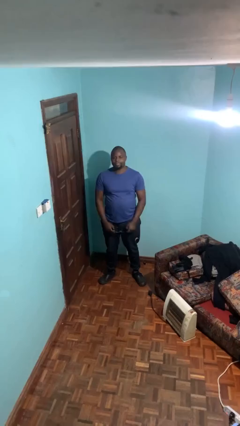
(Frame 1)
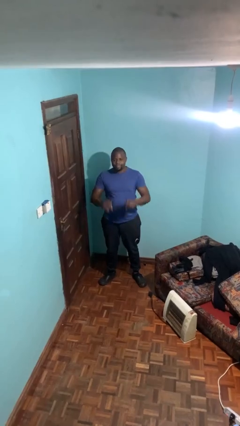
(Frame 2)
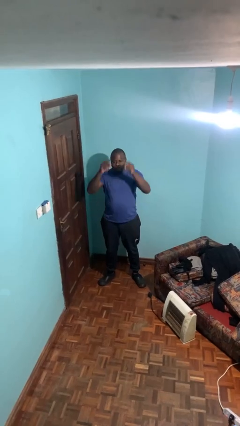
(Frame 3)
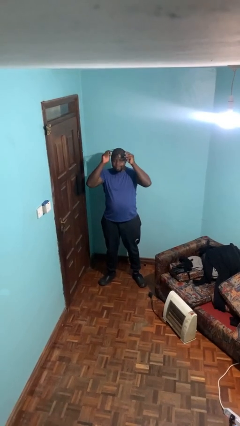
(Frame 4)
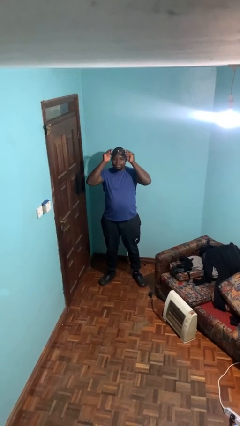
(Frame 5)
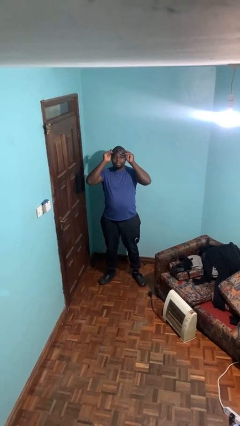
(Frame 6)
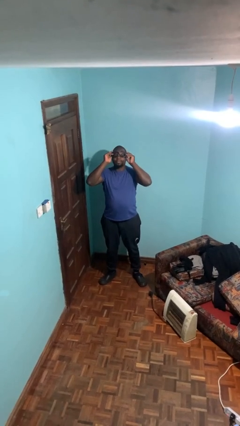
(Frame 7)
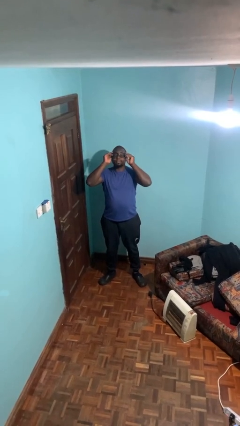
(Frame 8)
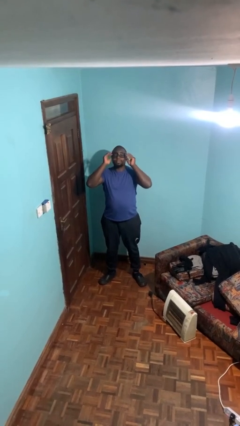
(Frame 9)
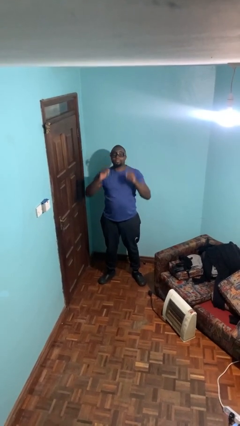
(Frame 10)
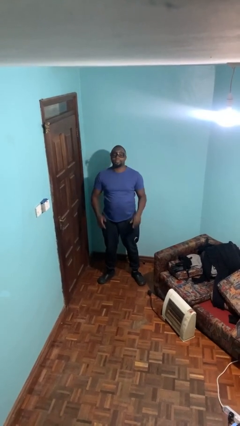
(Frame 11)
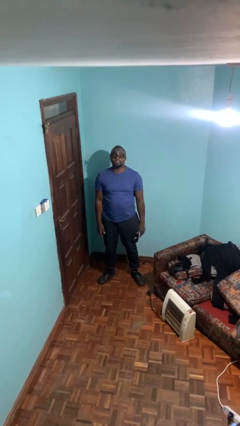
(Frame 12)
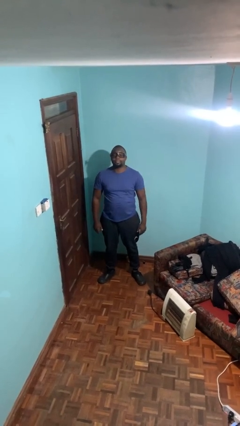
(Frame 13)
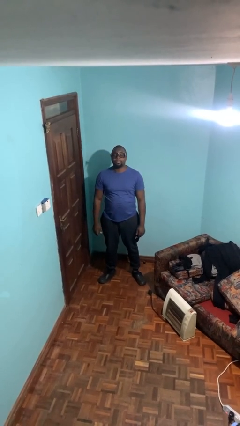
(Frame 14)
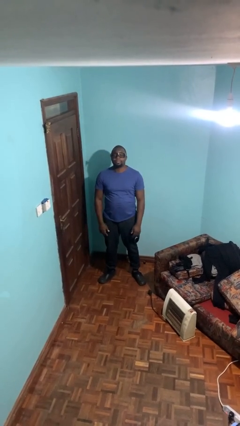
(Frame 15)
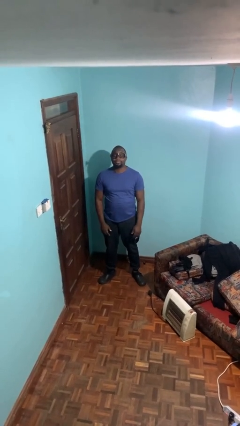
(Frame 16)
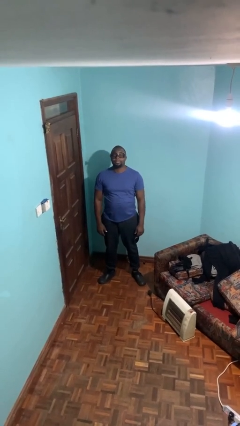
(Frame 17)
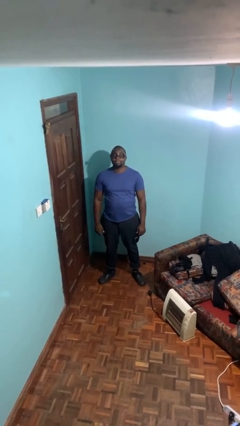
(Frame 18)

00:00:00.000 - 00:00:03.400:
person puts on glasses

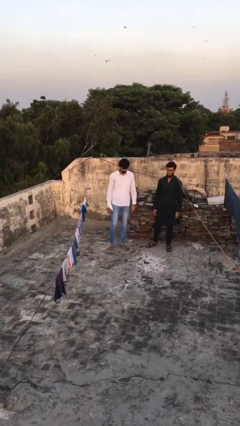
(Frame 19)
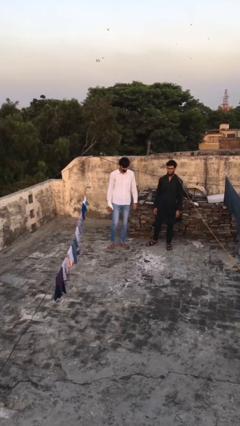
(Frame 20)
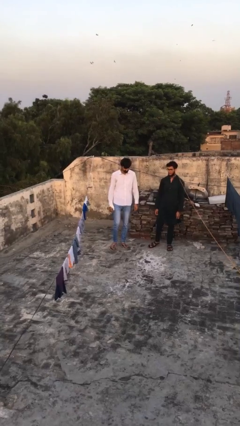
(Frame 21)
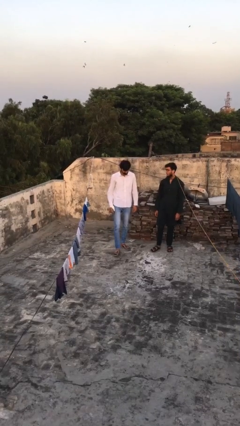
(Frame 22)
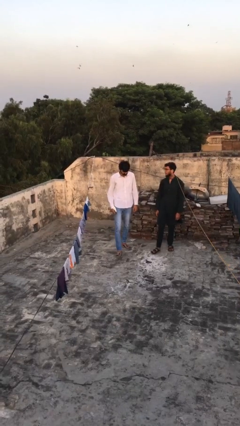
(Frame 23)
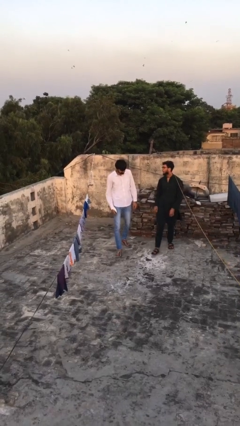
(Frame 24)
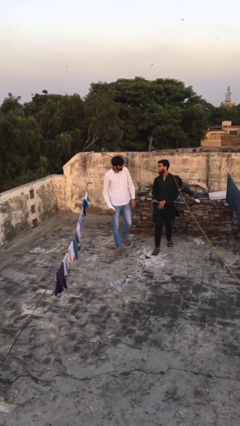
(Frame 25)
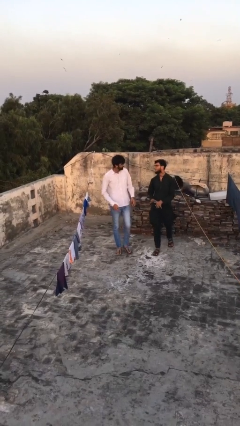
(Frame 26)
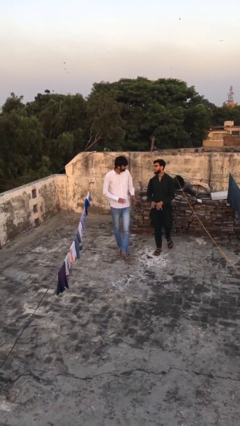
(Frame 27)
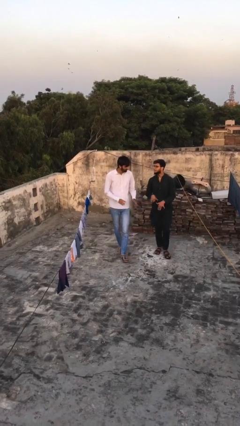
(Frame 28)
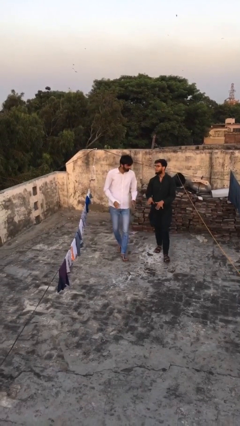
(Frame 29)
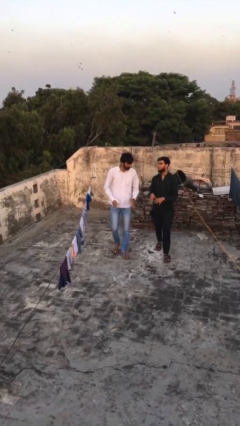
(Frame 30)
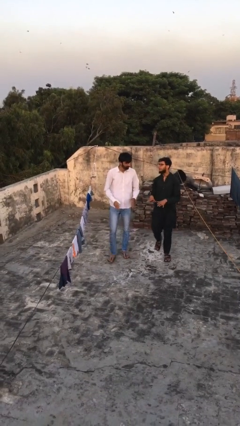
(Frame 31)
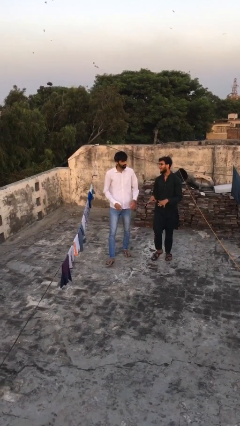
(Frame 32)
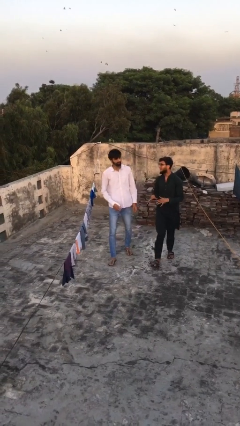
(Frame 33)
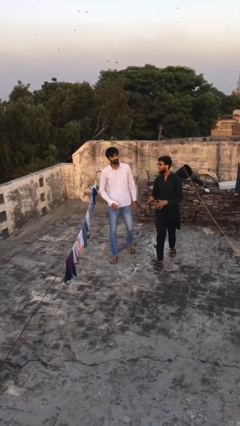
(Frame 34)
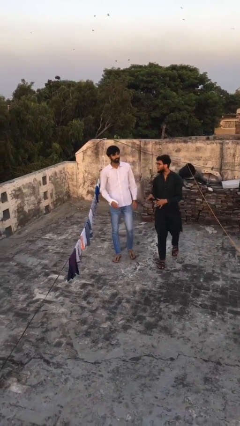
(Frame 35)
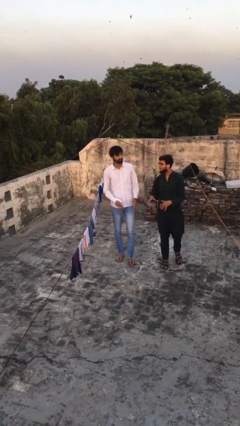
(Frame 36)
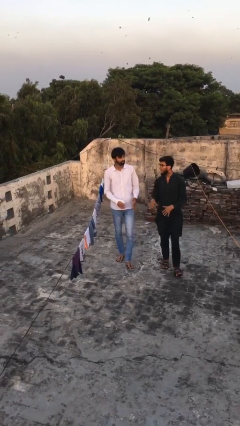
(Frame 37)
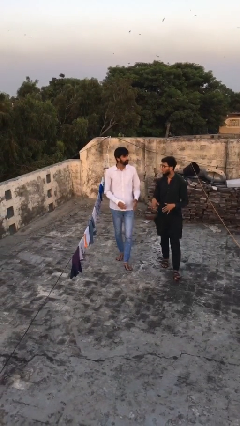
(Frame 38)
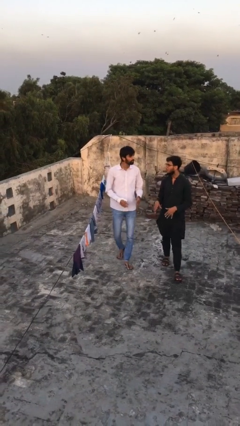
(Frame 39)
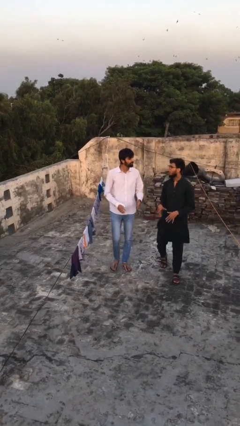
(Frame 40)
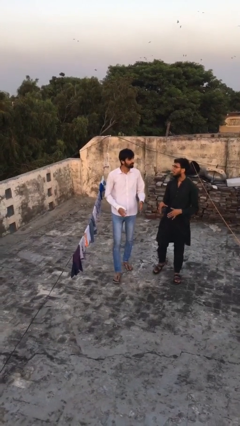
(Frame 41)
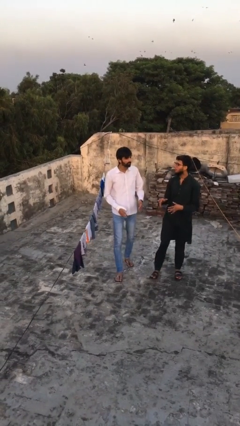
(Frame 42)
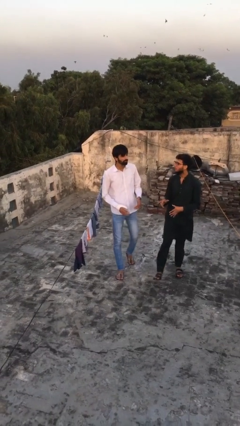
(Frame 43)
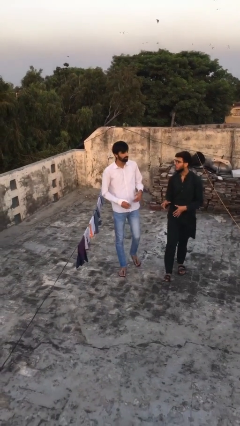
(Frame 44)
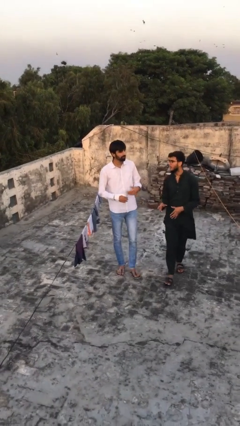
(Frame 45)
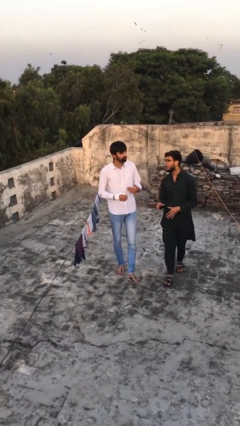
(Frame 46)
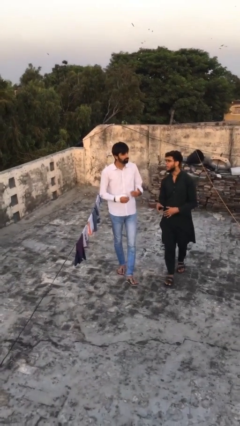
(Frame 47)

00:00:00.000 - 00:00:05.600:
person talks to person

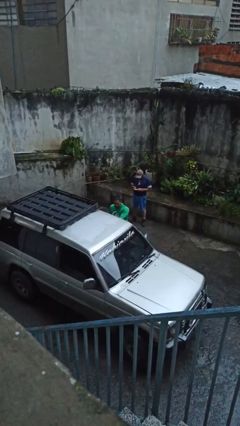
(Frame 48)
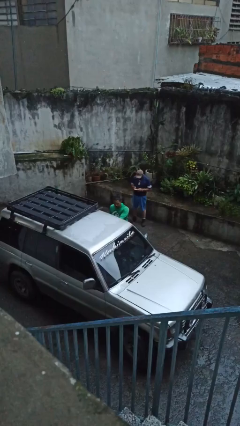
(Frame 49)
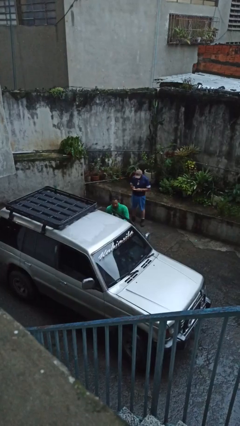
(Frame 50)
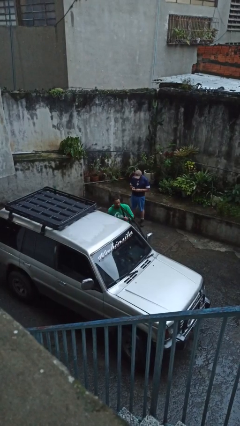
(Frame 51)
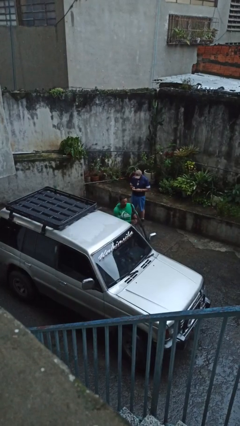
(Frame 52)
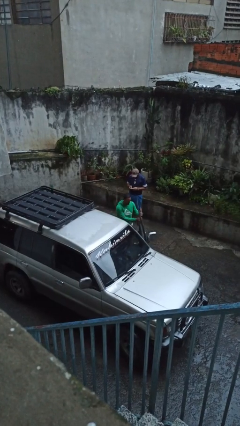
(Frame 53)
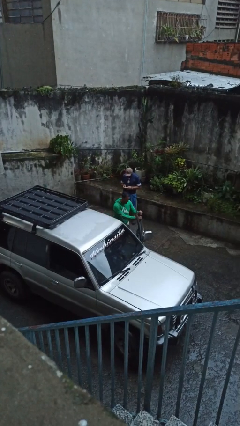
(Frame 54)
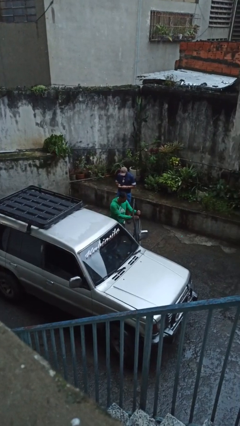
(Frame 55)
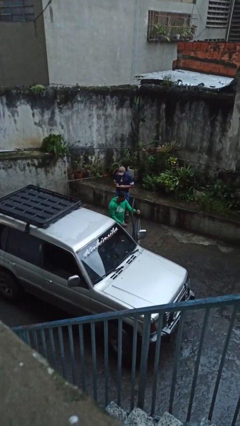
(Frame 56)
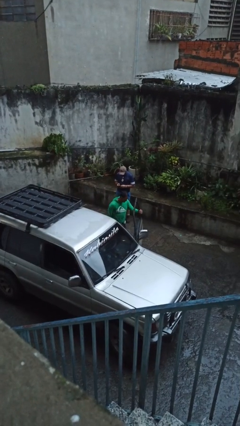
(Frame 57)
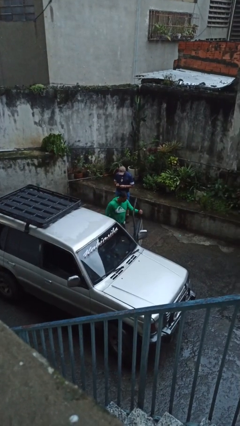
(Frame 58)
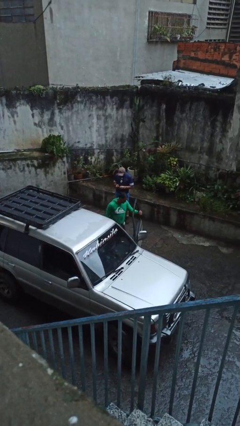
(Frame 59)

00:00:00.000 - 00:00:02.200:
person opens car door

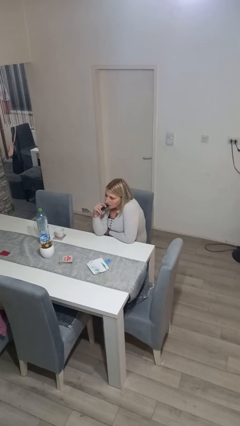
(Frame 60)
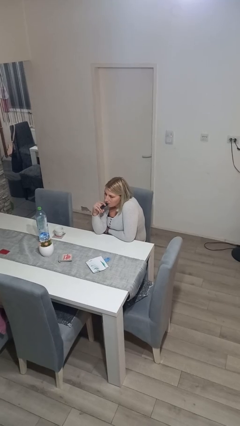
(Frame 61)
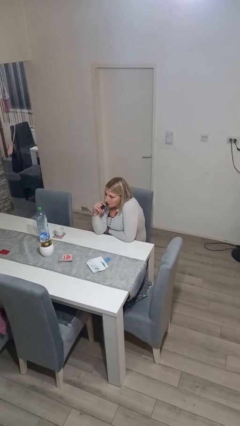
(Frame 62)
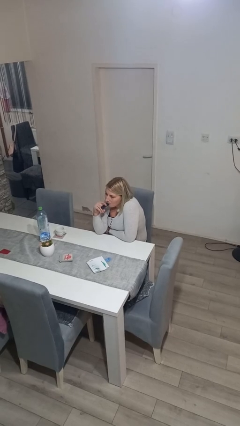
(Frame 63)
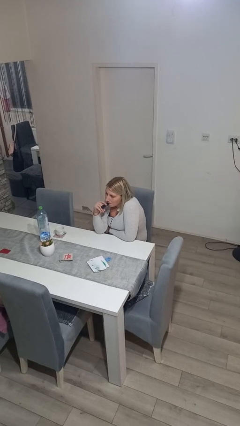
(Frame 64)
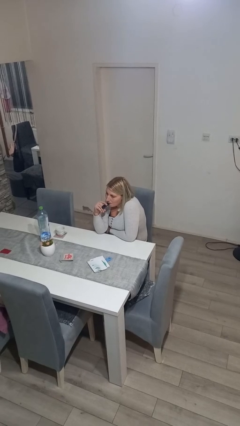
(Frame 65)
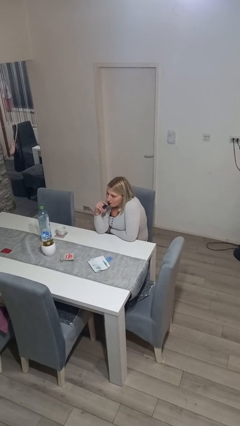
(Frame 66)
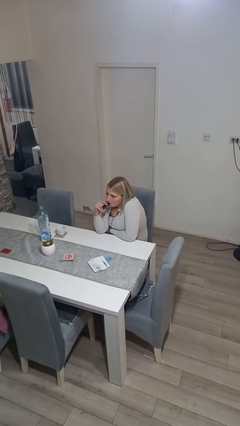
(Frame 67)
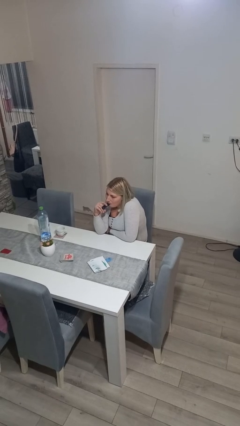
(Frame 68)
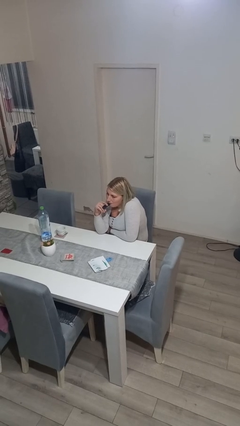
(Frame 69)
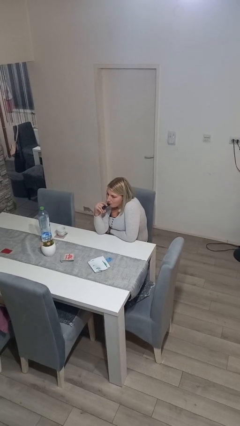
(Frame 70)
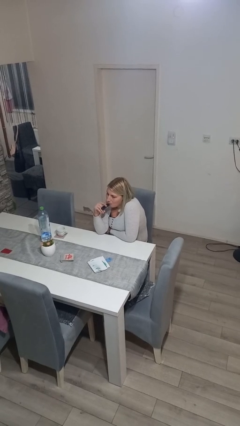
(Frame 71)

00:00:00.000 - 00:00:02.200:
person vapes

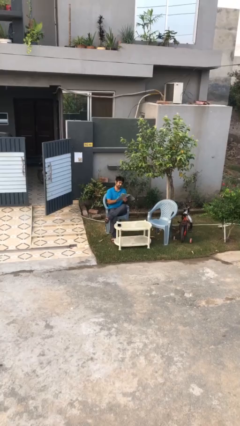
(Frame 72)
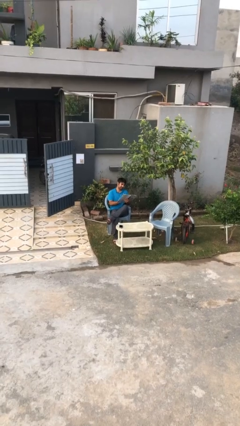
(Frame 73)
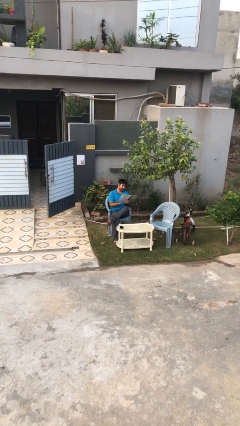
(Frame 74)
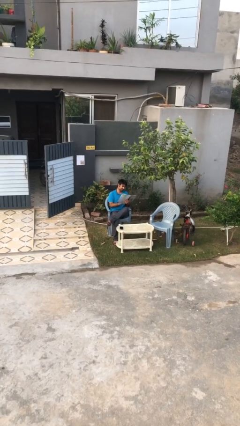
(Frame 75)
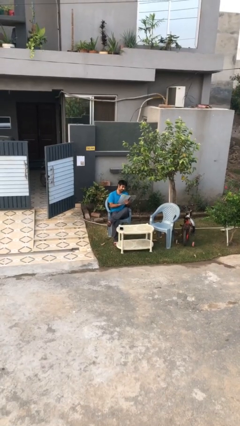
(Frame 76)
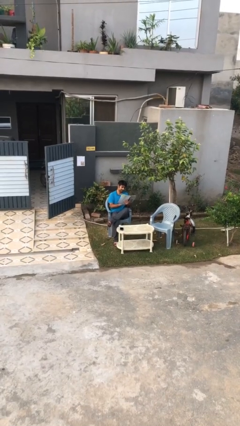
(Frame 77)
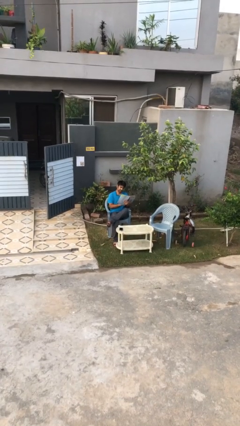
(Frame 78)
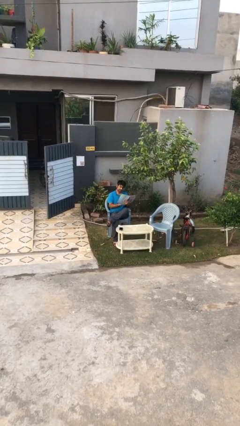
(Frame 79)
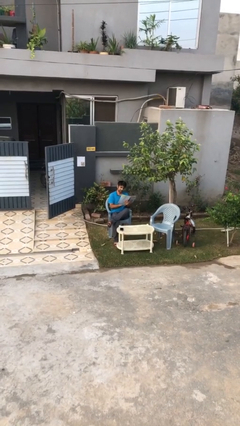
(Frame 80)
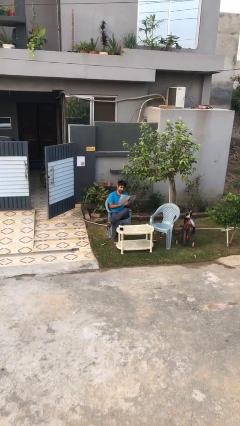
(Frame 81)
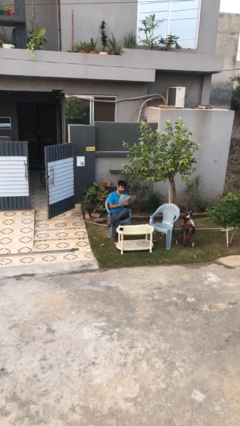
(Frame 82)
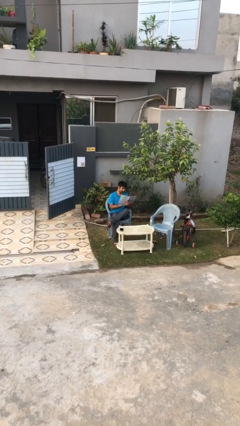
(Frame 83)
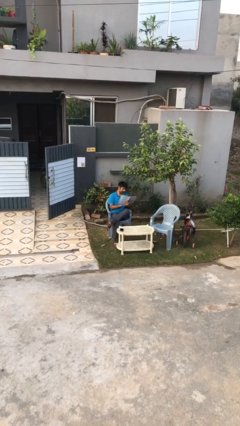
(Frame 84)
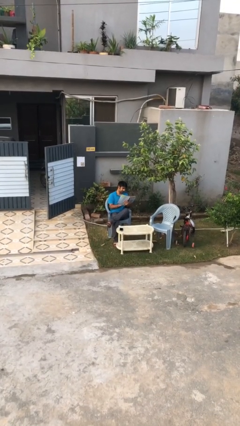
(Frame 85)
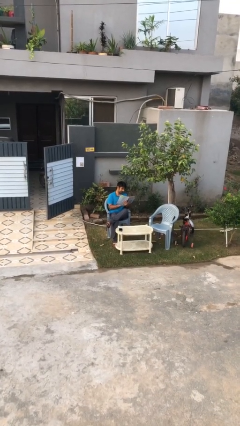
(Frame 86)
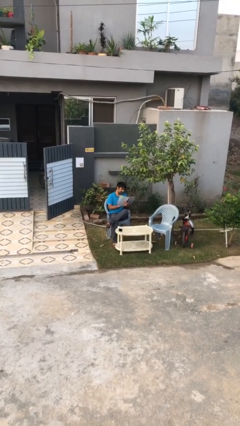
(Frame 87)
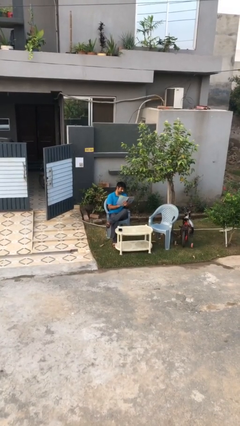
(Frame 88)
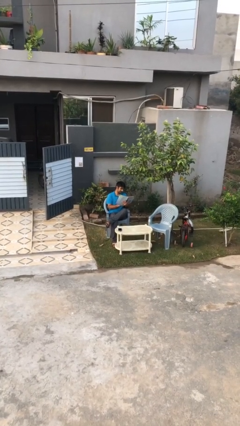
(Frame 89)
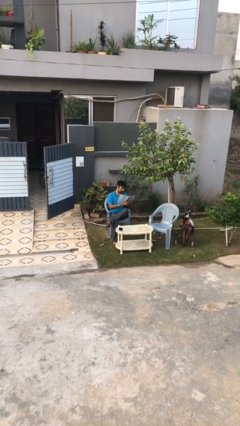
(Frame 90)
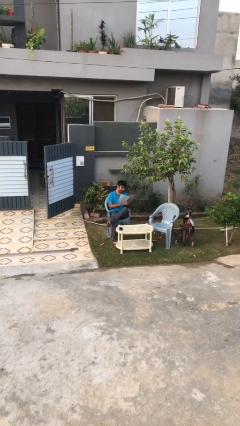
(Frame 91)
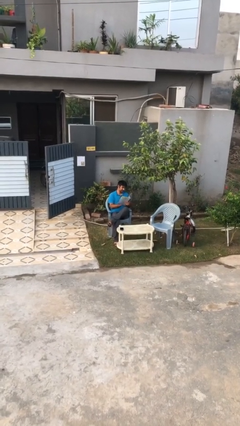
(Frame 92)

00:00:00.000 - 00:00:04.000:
person reads document

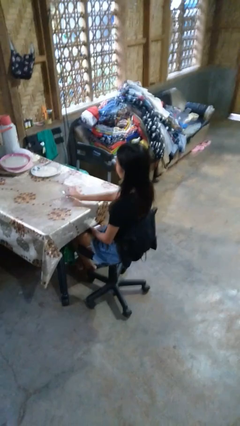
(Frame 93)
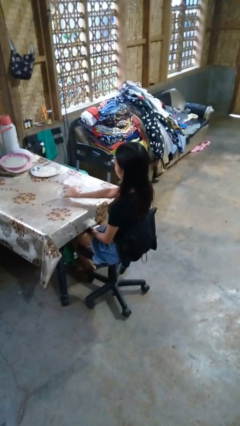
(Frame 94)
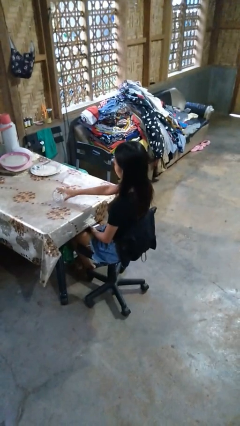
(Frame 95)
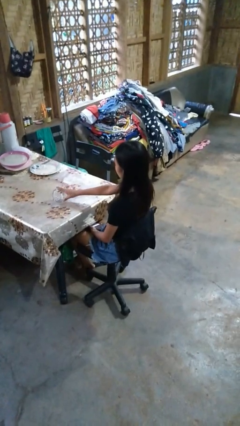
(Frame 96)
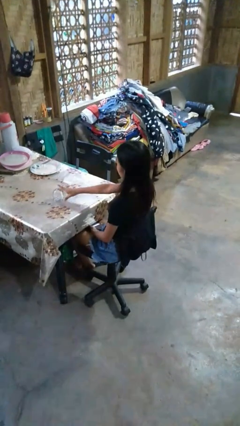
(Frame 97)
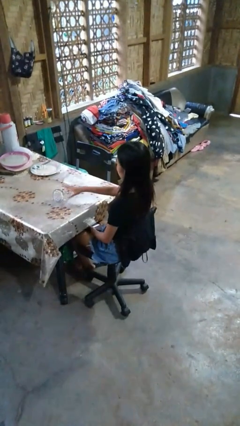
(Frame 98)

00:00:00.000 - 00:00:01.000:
person knocks over glass
